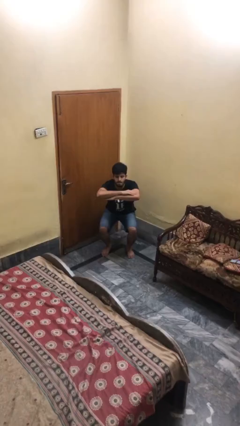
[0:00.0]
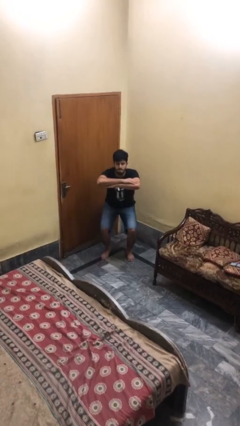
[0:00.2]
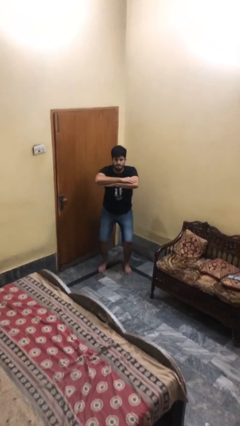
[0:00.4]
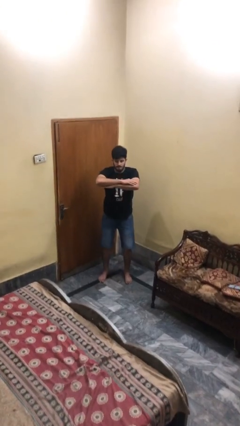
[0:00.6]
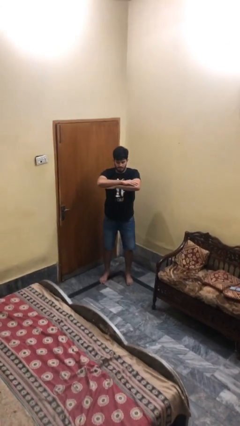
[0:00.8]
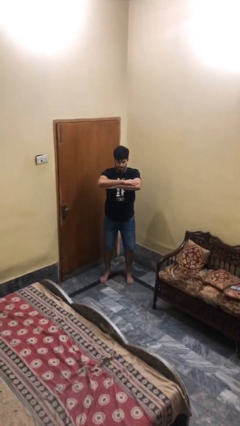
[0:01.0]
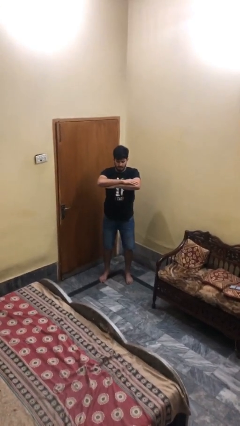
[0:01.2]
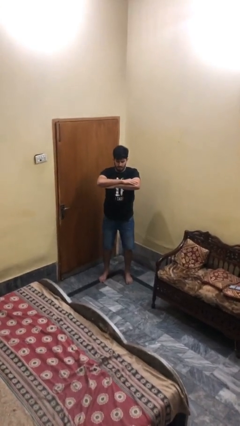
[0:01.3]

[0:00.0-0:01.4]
person stands up

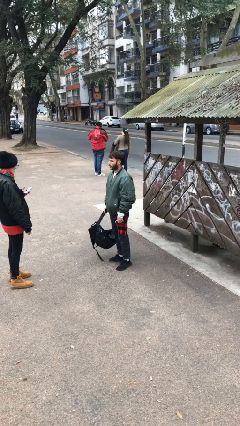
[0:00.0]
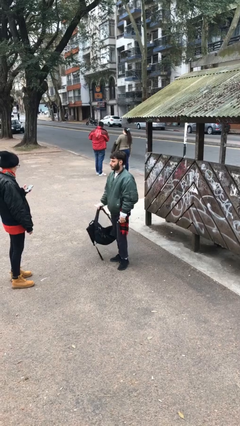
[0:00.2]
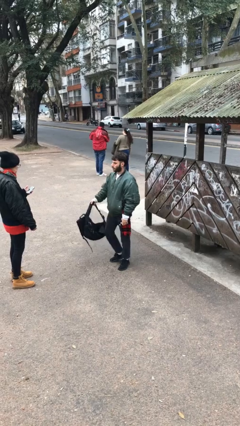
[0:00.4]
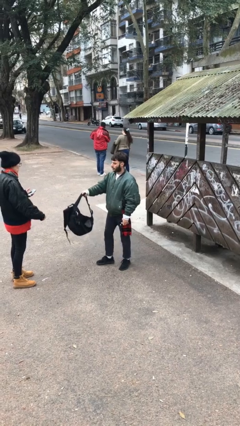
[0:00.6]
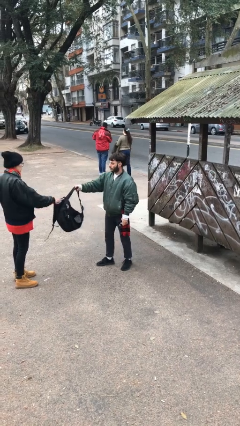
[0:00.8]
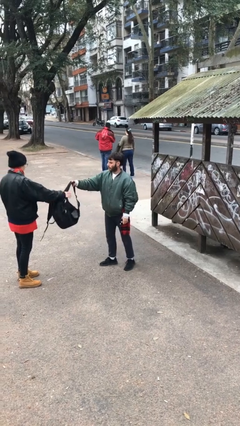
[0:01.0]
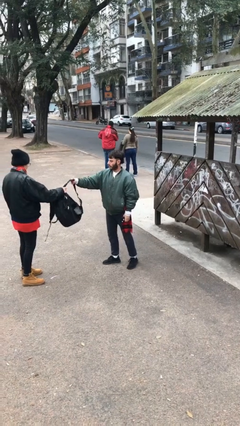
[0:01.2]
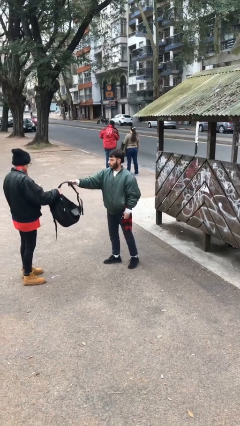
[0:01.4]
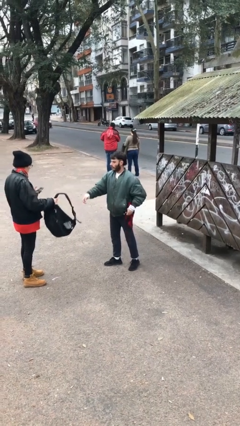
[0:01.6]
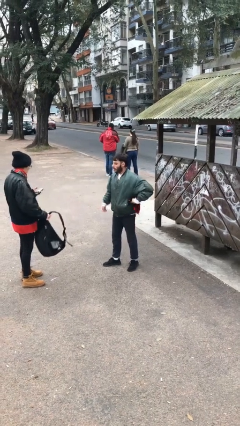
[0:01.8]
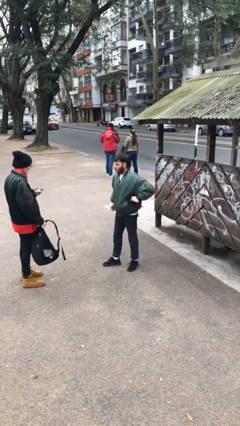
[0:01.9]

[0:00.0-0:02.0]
person transfers object to person

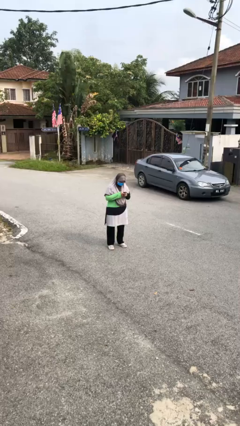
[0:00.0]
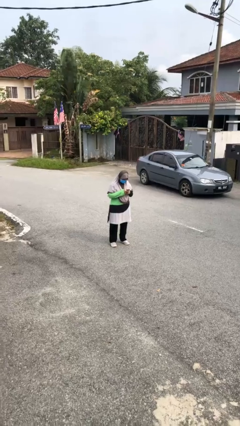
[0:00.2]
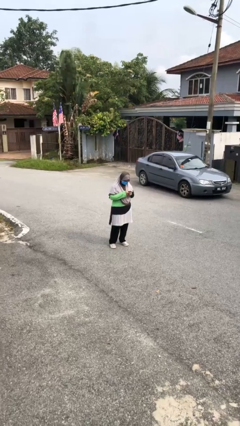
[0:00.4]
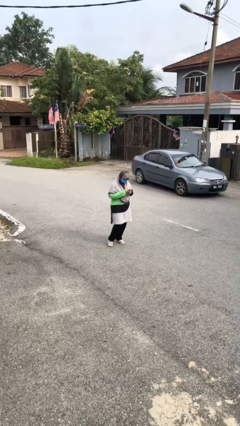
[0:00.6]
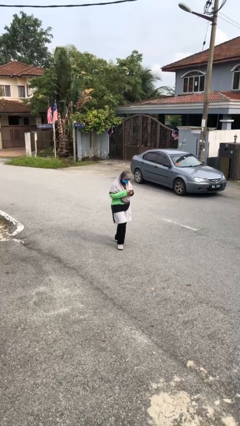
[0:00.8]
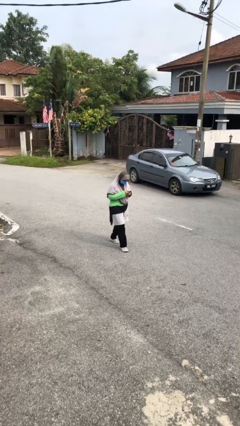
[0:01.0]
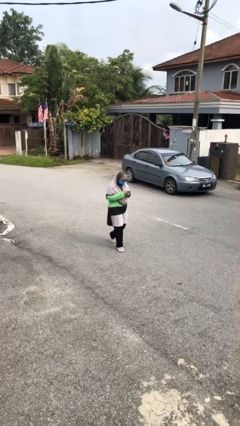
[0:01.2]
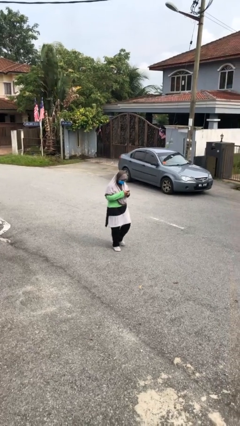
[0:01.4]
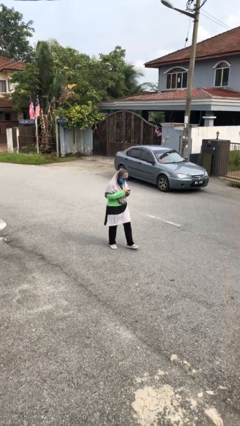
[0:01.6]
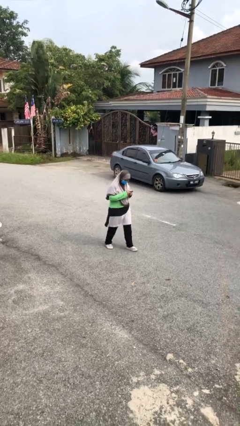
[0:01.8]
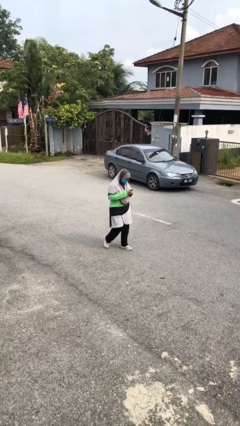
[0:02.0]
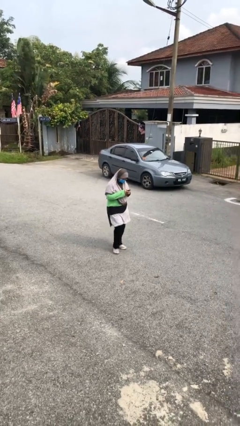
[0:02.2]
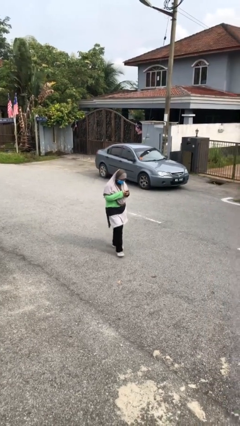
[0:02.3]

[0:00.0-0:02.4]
person texts on phone

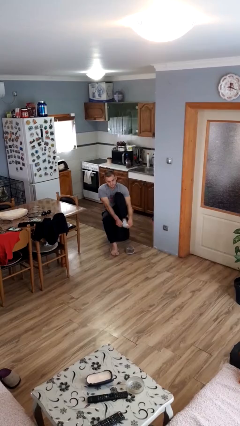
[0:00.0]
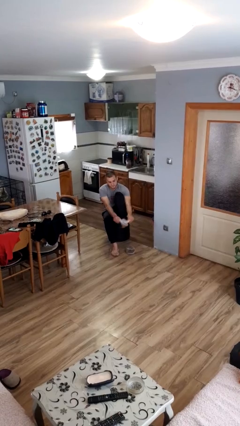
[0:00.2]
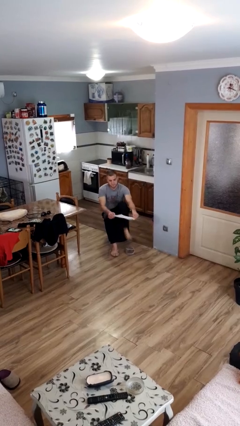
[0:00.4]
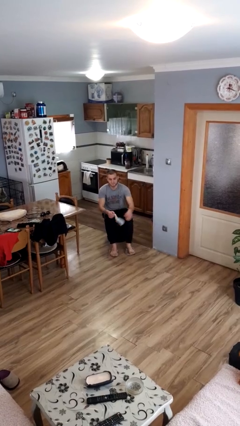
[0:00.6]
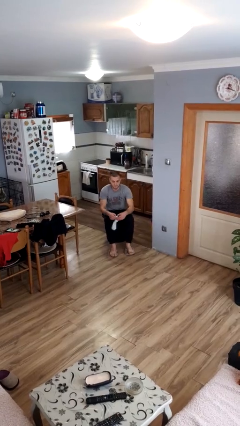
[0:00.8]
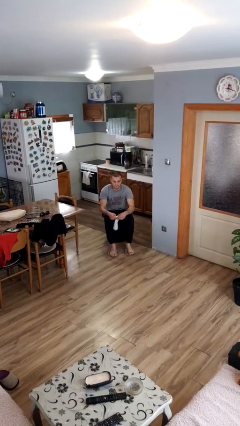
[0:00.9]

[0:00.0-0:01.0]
person takes off socks

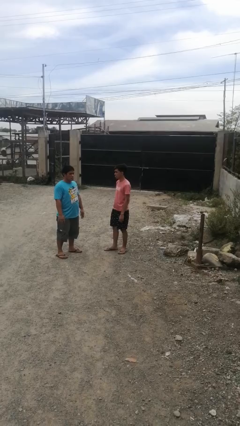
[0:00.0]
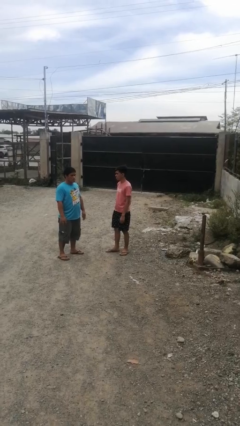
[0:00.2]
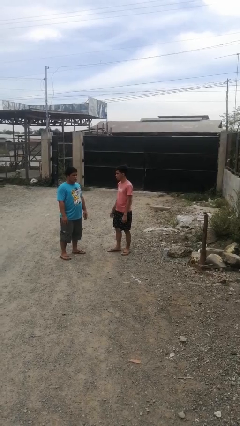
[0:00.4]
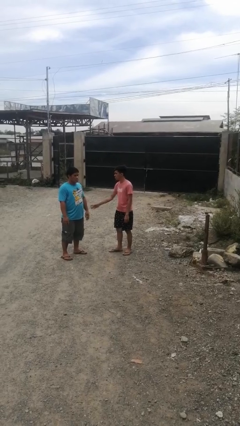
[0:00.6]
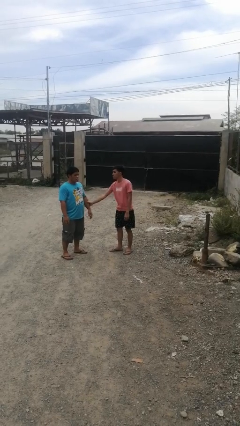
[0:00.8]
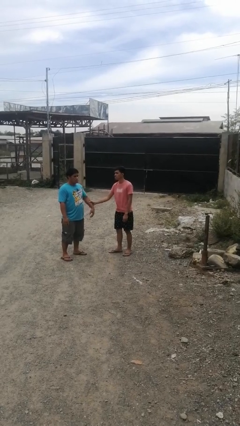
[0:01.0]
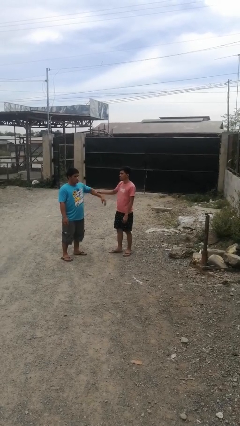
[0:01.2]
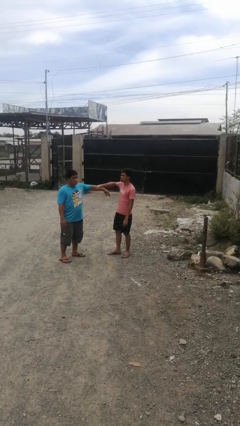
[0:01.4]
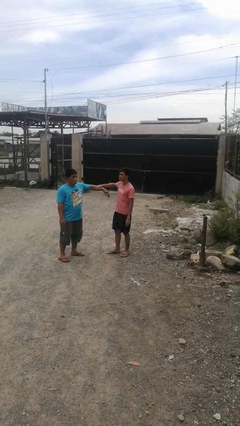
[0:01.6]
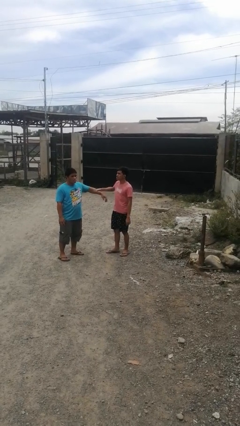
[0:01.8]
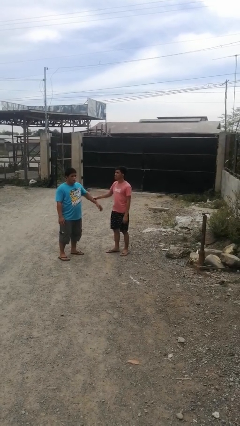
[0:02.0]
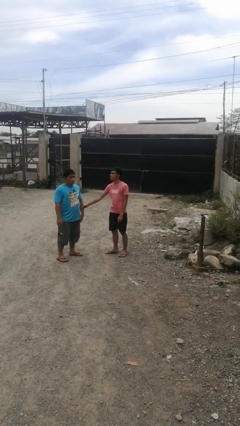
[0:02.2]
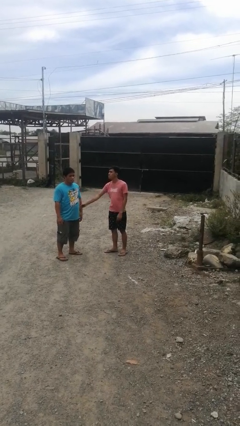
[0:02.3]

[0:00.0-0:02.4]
person grabs person by forearm

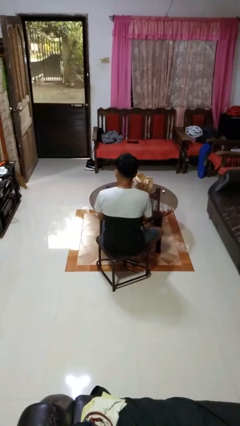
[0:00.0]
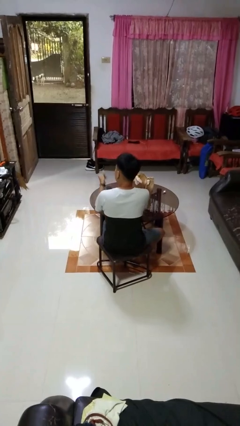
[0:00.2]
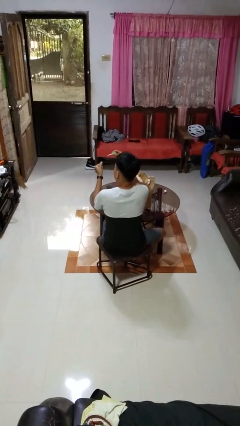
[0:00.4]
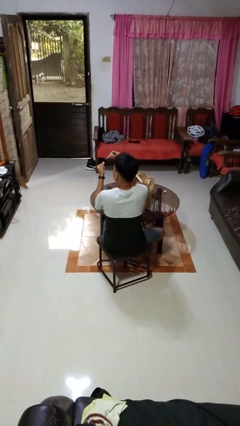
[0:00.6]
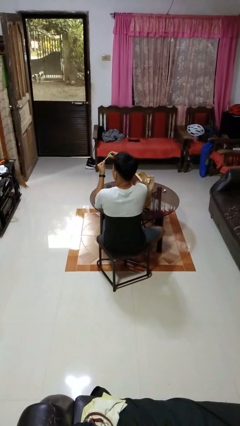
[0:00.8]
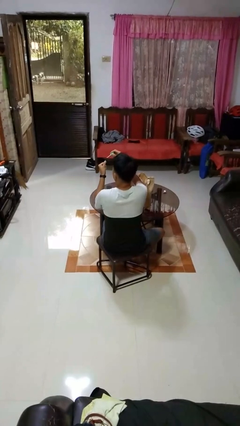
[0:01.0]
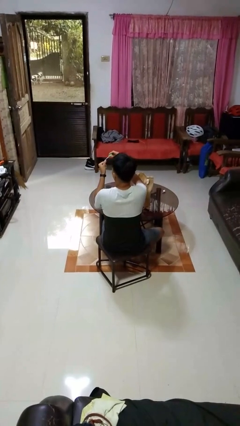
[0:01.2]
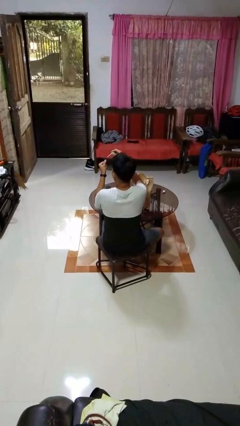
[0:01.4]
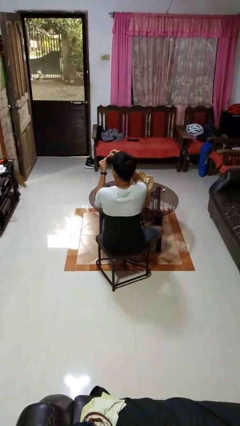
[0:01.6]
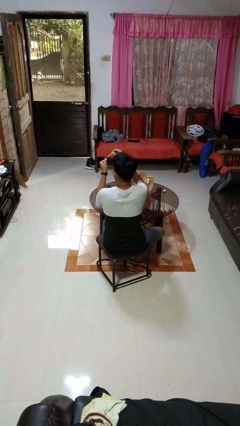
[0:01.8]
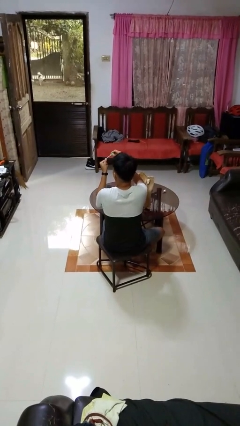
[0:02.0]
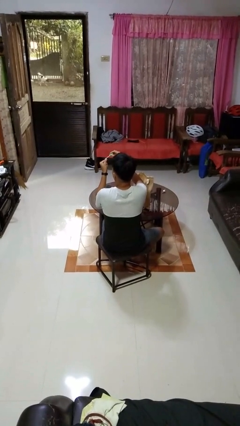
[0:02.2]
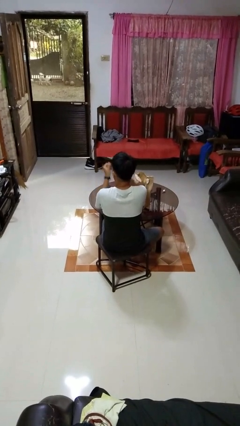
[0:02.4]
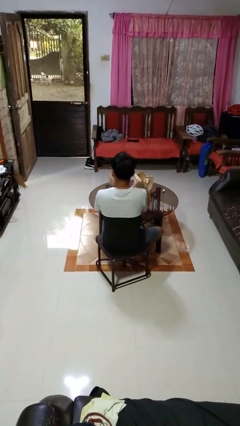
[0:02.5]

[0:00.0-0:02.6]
person paints fingernails

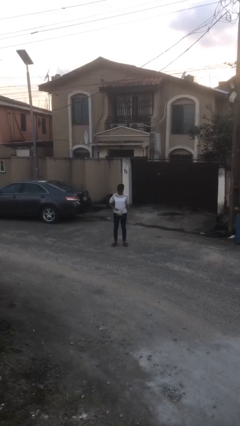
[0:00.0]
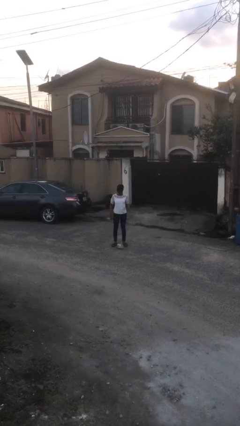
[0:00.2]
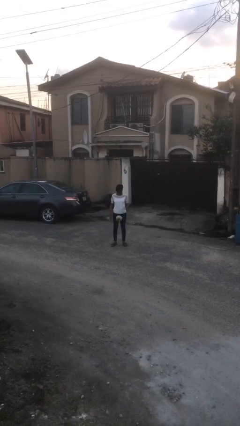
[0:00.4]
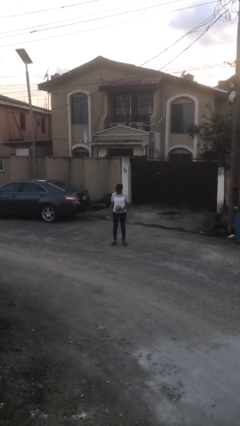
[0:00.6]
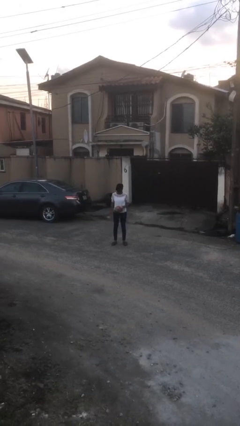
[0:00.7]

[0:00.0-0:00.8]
person bounces ball on floor

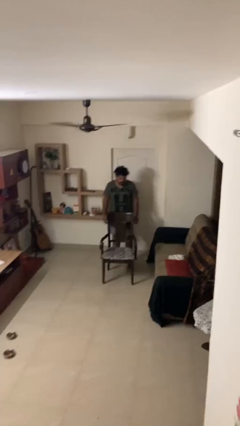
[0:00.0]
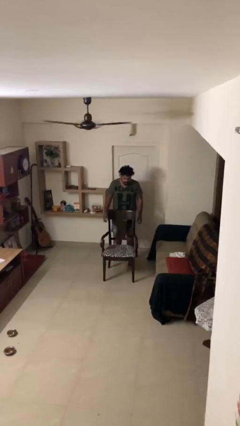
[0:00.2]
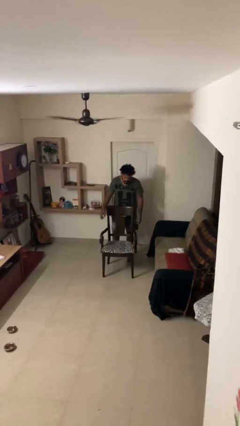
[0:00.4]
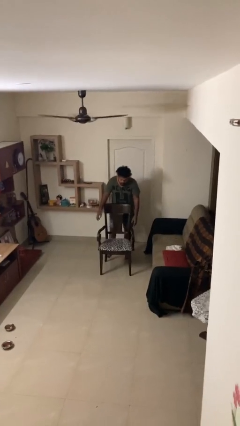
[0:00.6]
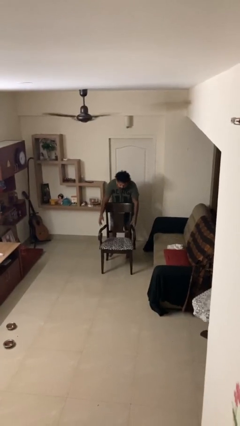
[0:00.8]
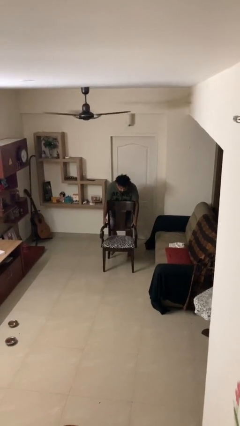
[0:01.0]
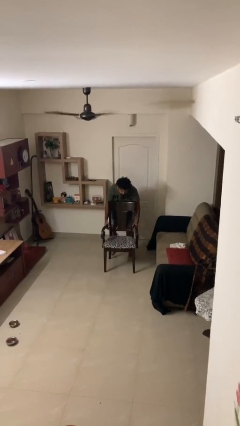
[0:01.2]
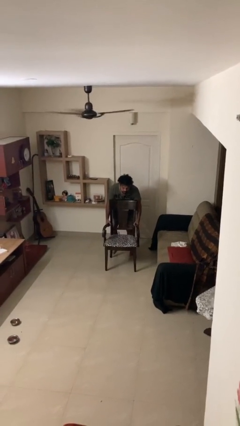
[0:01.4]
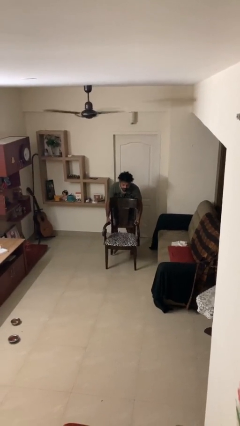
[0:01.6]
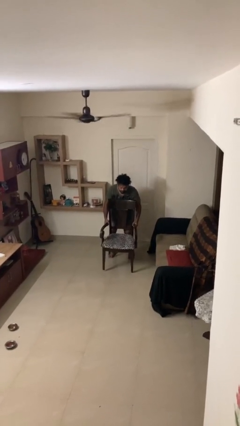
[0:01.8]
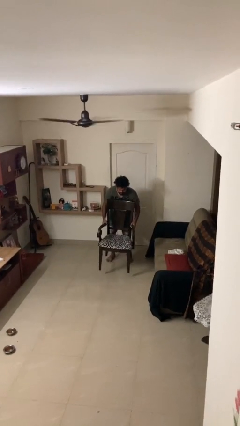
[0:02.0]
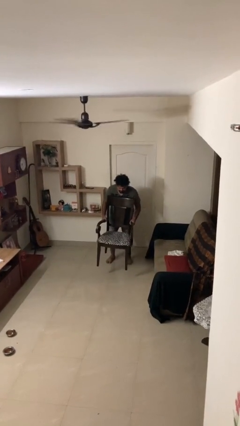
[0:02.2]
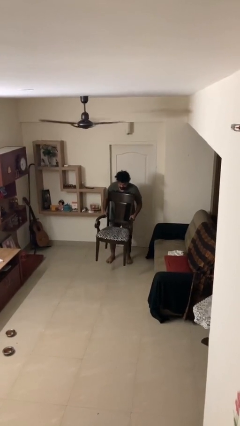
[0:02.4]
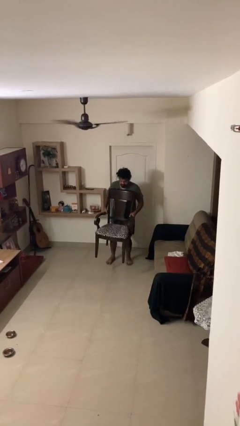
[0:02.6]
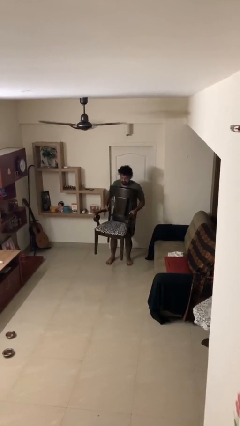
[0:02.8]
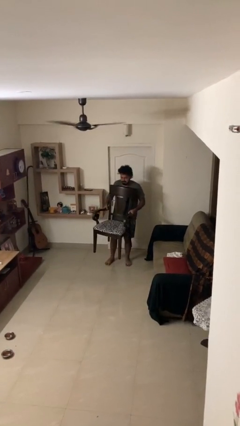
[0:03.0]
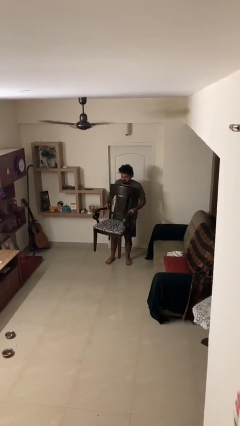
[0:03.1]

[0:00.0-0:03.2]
person picks up object from floor

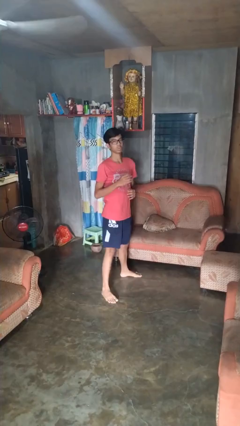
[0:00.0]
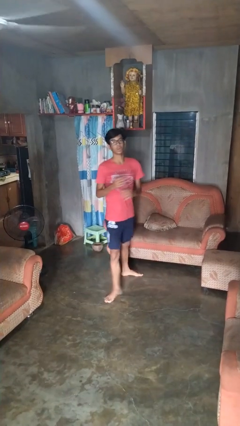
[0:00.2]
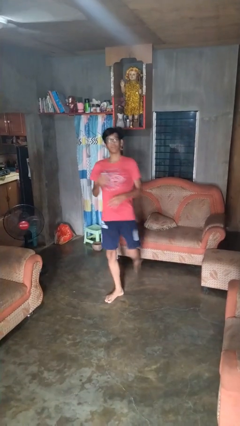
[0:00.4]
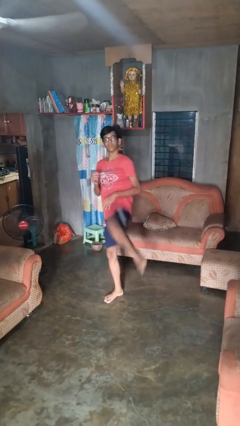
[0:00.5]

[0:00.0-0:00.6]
person karate kicks
